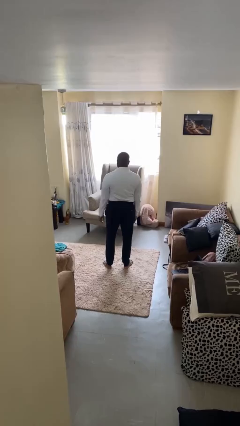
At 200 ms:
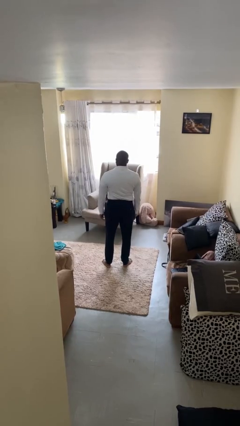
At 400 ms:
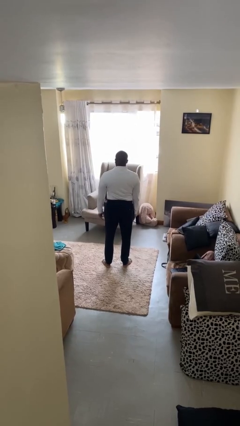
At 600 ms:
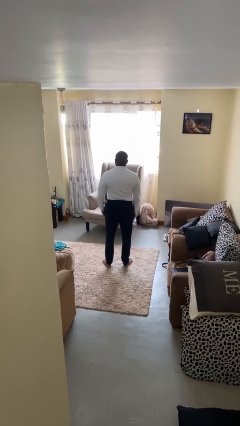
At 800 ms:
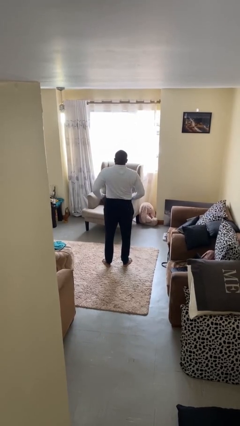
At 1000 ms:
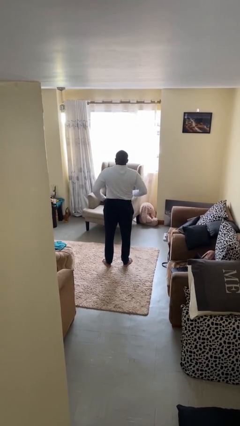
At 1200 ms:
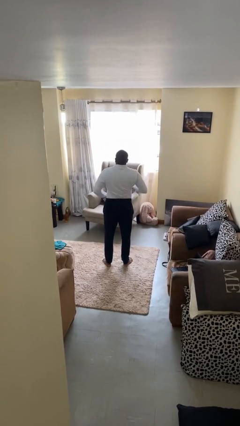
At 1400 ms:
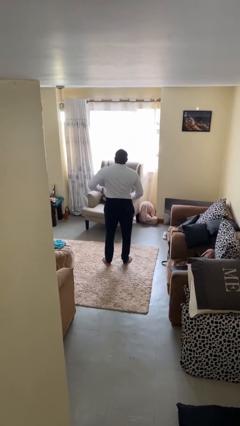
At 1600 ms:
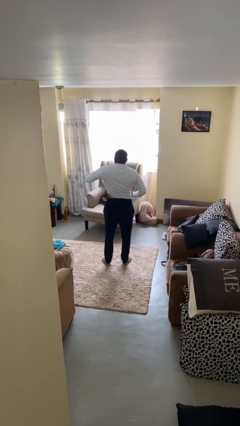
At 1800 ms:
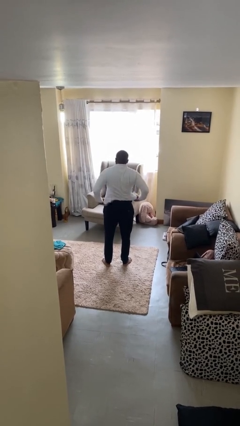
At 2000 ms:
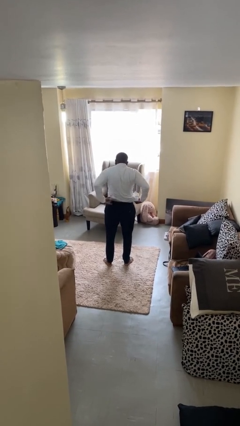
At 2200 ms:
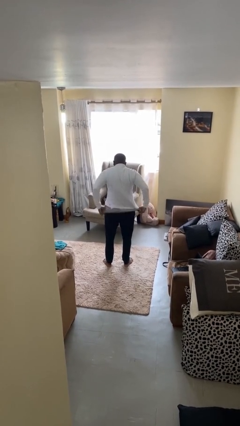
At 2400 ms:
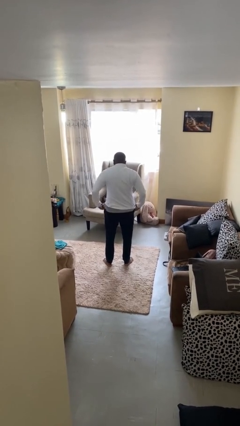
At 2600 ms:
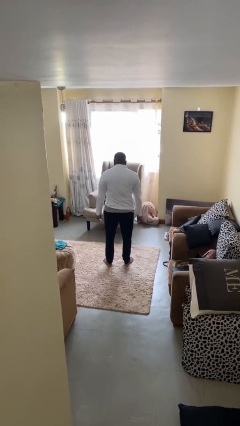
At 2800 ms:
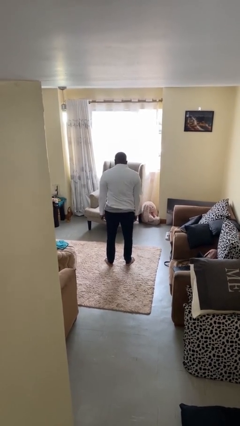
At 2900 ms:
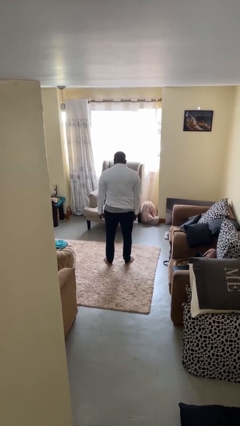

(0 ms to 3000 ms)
person untucks shirt

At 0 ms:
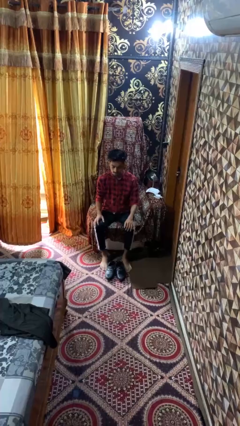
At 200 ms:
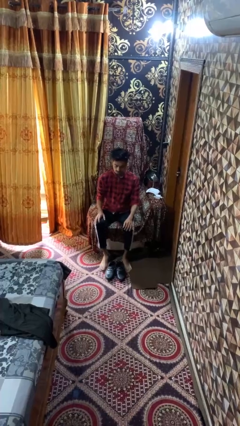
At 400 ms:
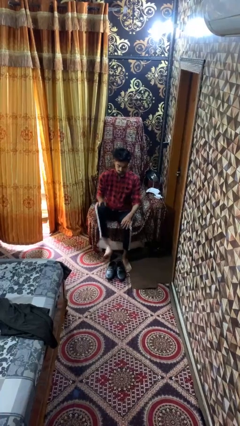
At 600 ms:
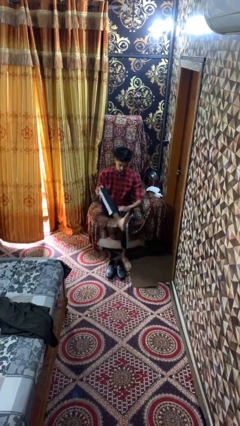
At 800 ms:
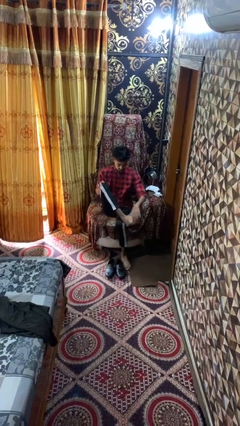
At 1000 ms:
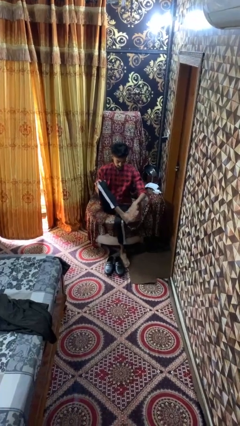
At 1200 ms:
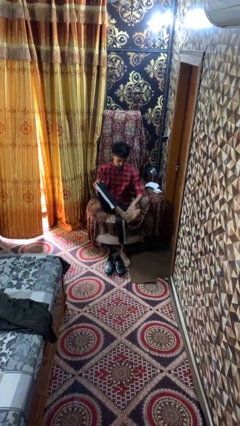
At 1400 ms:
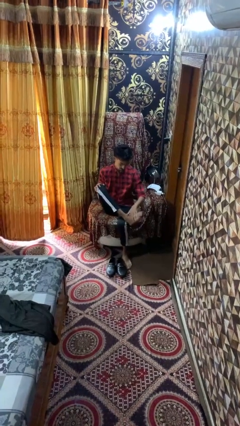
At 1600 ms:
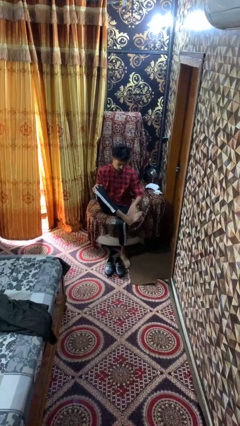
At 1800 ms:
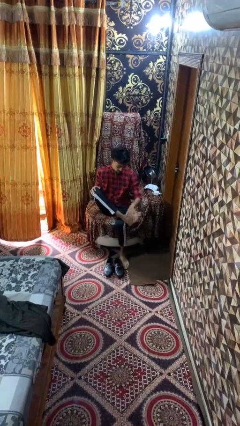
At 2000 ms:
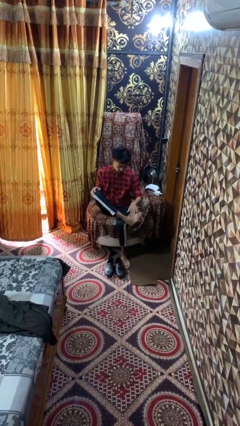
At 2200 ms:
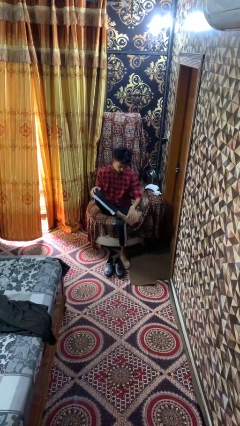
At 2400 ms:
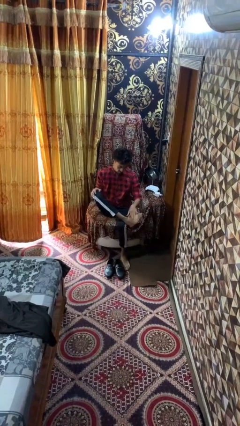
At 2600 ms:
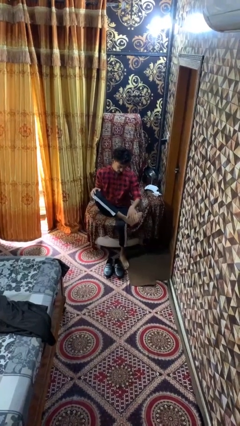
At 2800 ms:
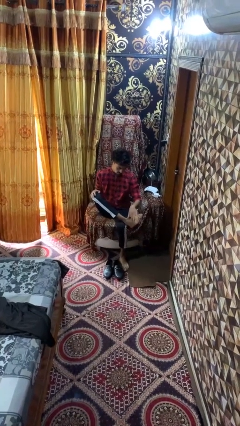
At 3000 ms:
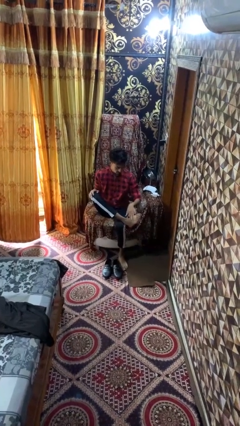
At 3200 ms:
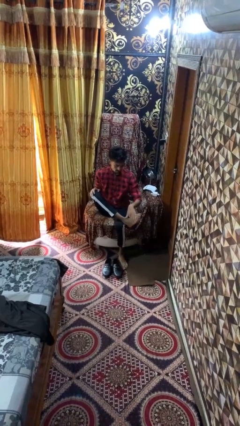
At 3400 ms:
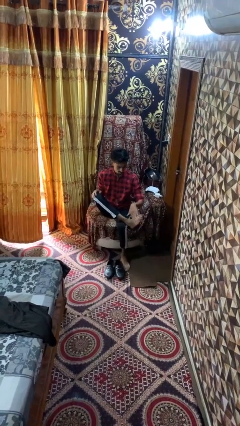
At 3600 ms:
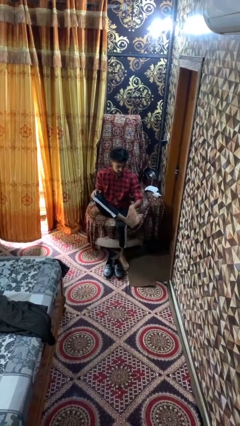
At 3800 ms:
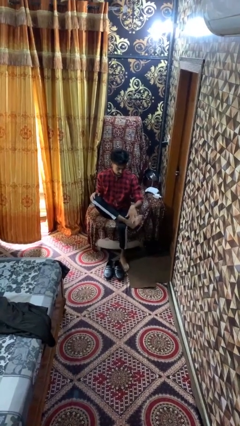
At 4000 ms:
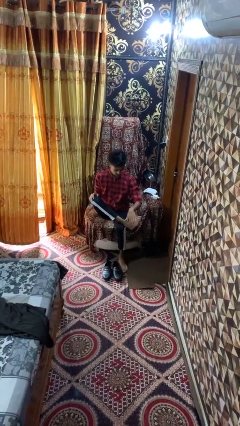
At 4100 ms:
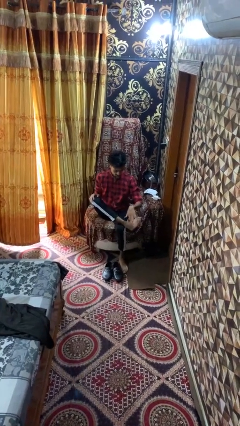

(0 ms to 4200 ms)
person rubs foot

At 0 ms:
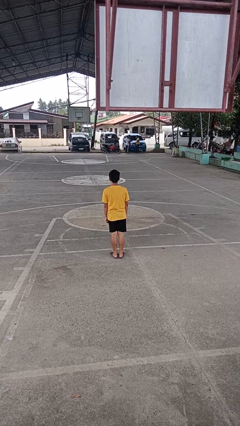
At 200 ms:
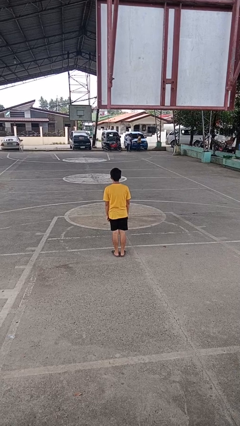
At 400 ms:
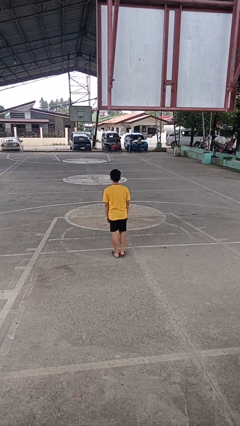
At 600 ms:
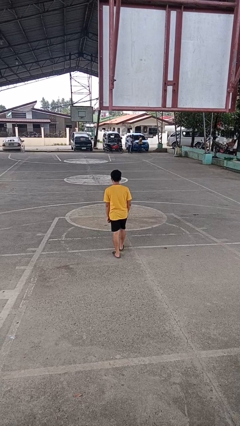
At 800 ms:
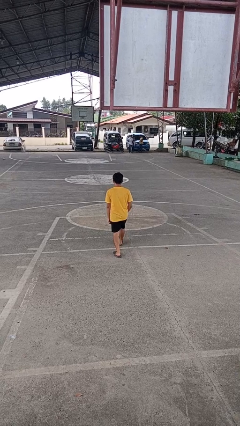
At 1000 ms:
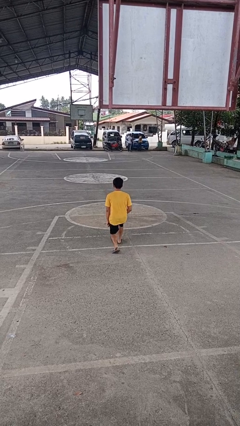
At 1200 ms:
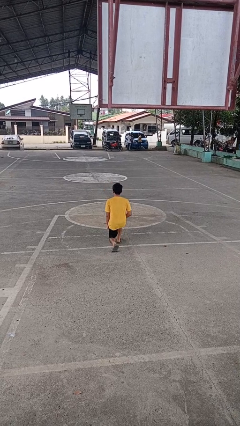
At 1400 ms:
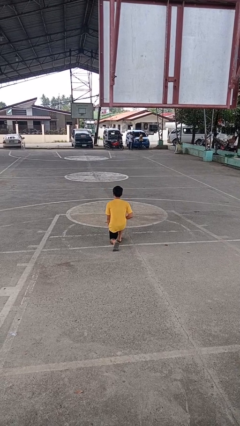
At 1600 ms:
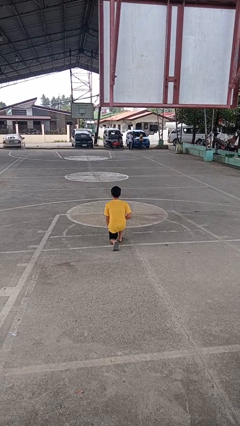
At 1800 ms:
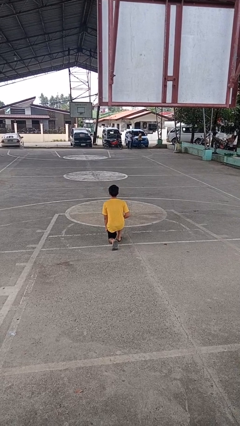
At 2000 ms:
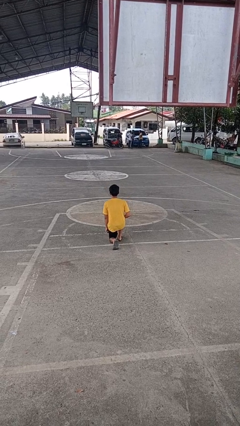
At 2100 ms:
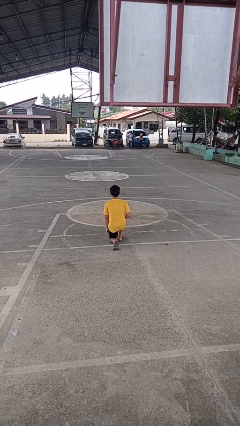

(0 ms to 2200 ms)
person kneels

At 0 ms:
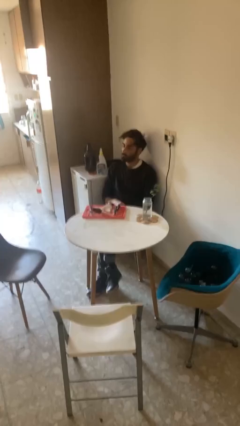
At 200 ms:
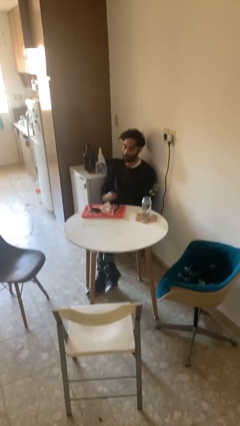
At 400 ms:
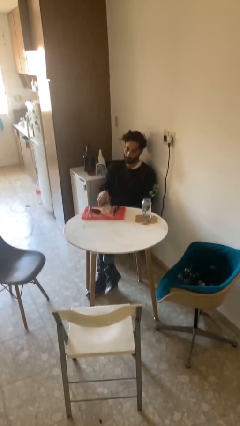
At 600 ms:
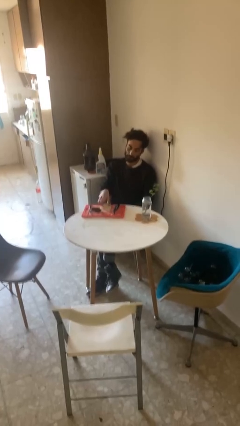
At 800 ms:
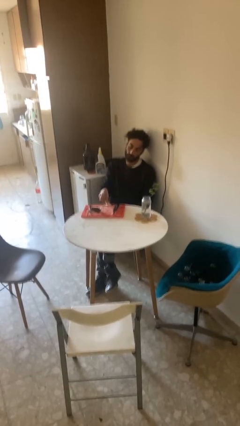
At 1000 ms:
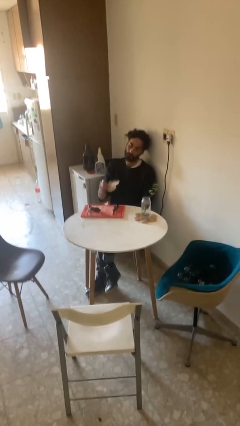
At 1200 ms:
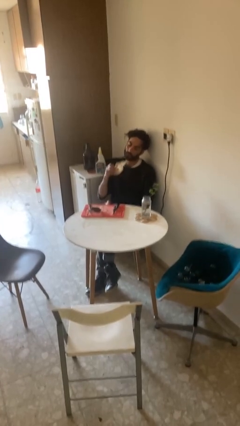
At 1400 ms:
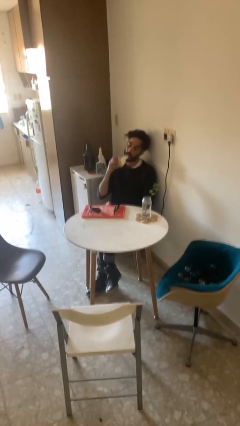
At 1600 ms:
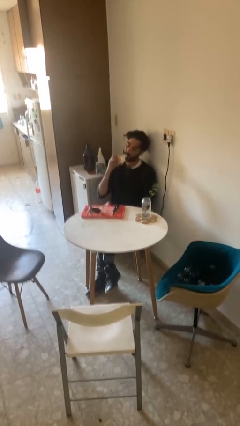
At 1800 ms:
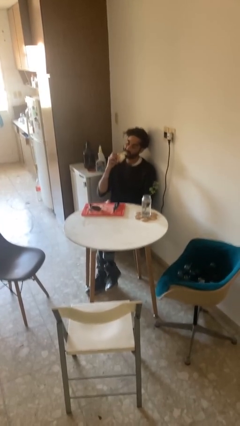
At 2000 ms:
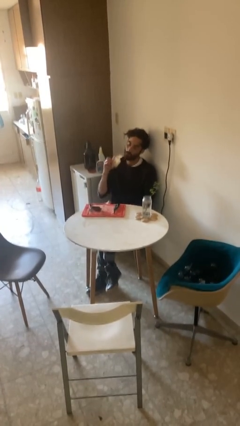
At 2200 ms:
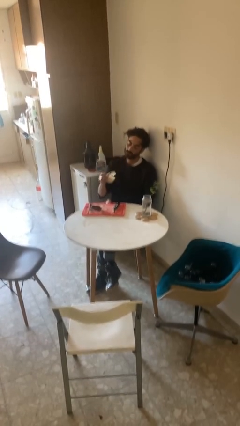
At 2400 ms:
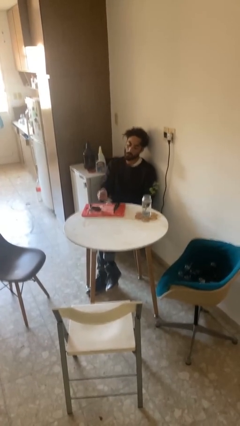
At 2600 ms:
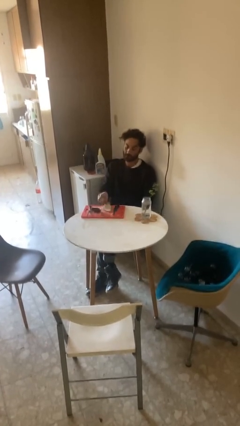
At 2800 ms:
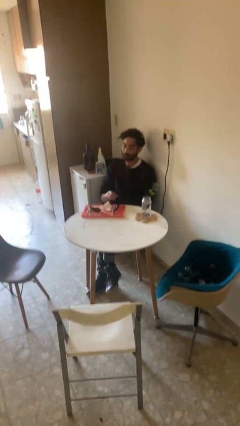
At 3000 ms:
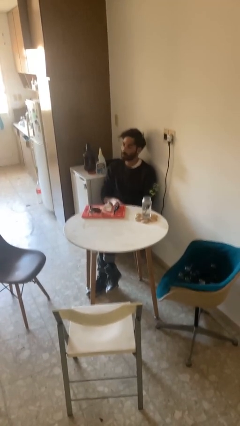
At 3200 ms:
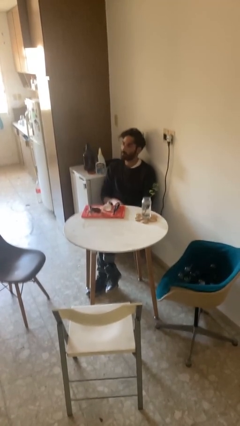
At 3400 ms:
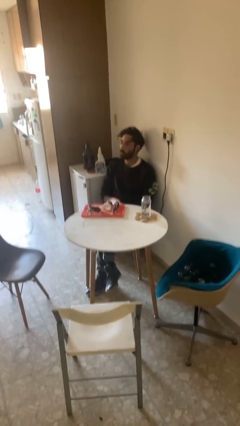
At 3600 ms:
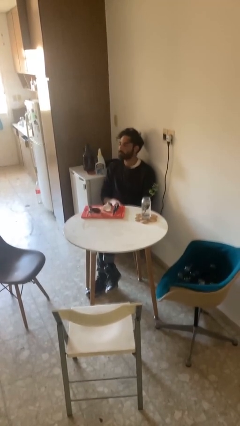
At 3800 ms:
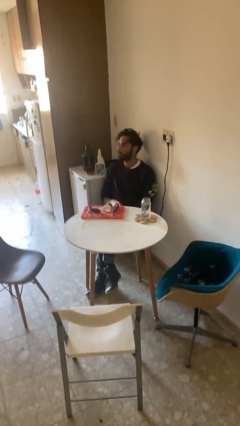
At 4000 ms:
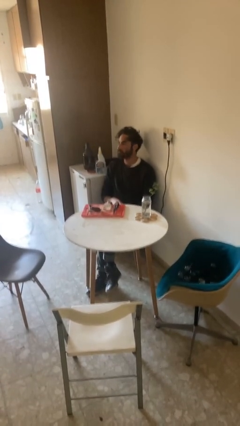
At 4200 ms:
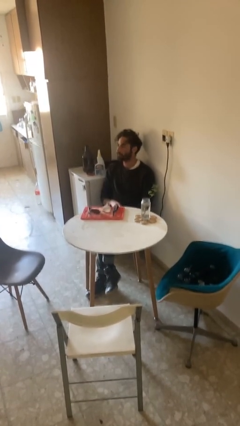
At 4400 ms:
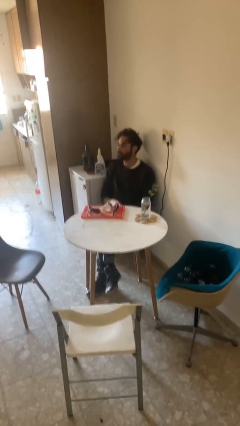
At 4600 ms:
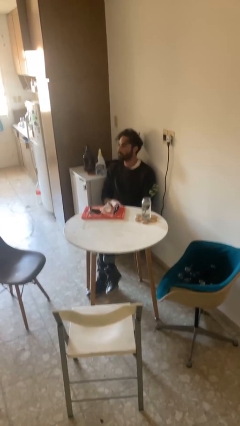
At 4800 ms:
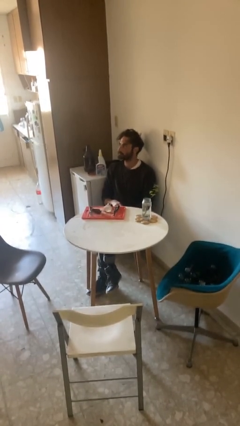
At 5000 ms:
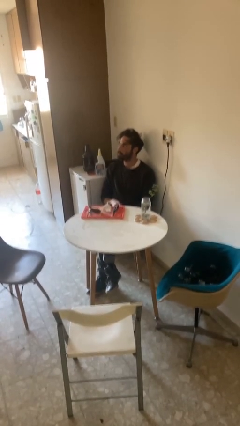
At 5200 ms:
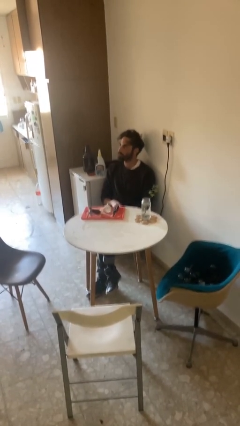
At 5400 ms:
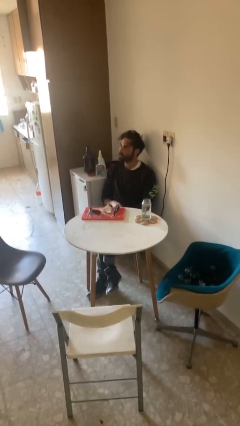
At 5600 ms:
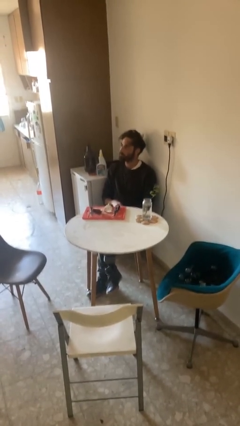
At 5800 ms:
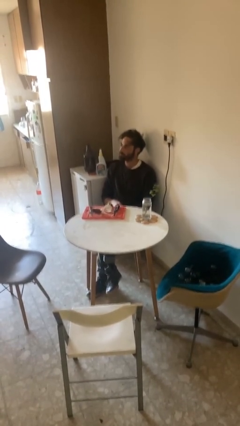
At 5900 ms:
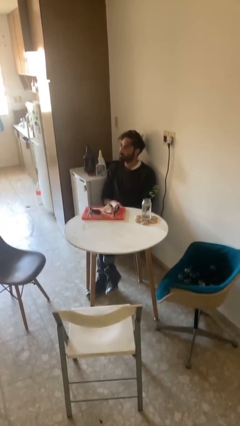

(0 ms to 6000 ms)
person eats with hands

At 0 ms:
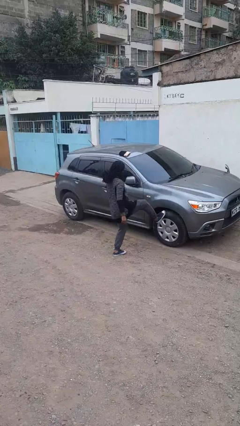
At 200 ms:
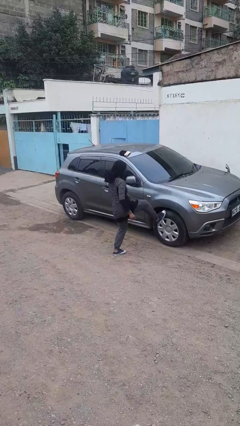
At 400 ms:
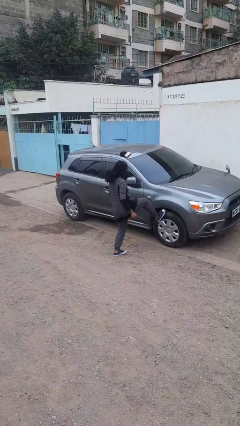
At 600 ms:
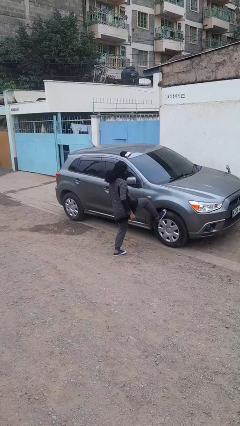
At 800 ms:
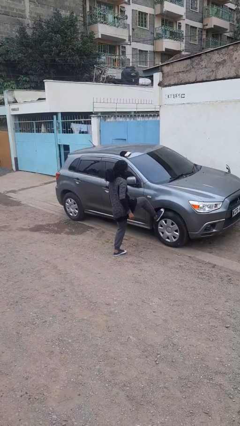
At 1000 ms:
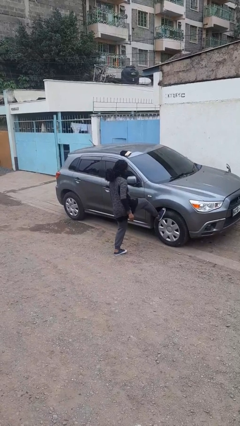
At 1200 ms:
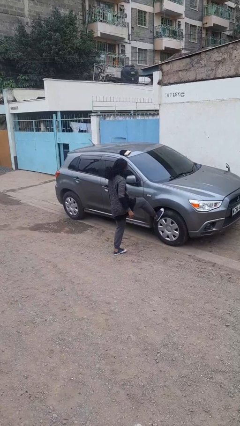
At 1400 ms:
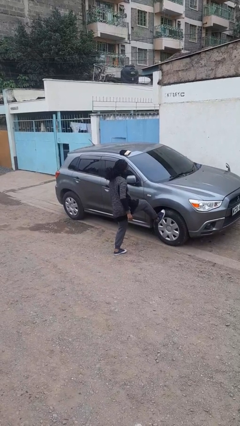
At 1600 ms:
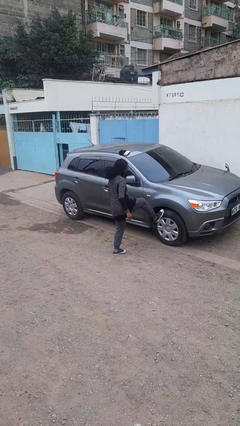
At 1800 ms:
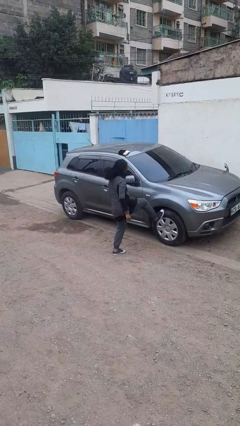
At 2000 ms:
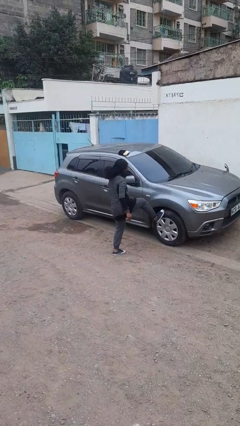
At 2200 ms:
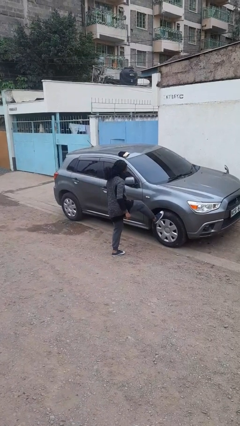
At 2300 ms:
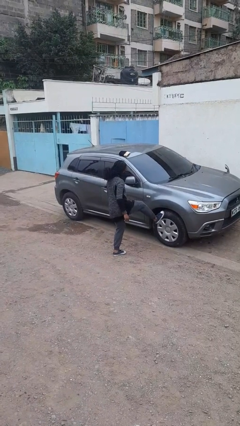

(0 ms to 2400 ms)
person kicks car tires
